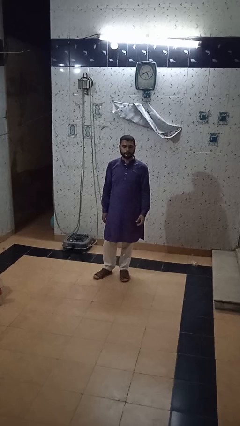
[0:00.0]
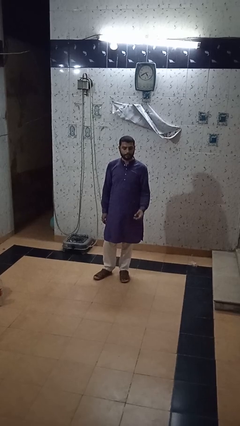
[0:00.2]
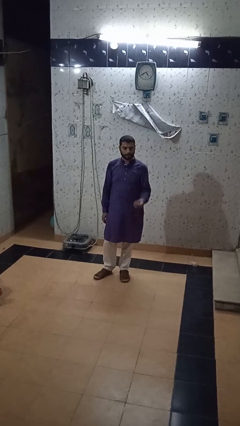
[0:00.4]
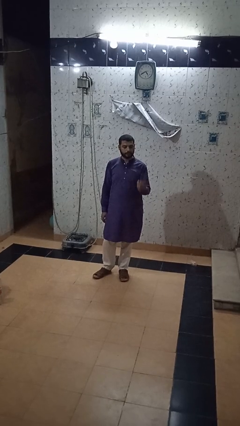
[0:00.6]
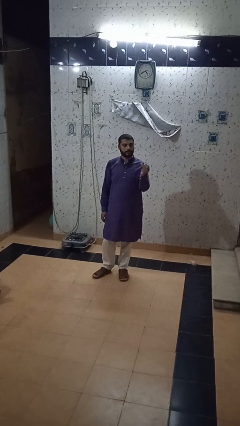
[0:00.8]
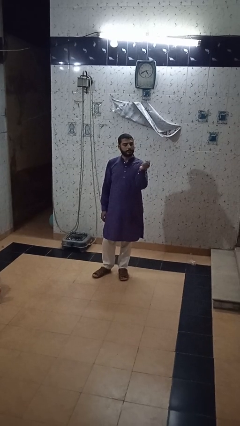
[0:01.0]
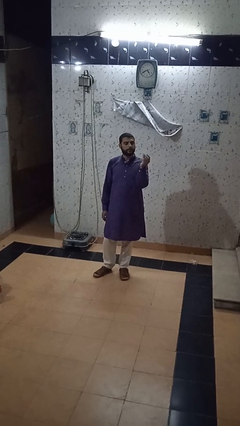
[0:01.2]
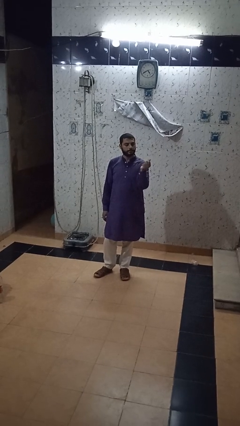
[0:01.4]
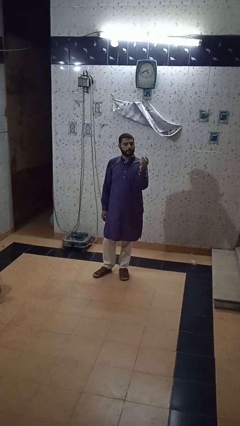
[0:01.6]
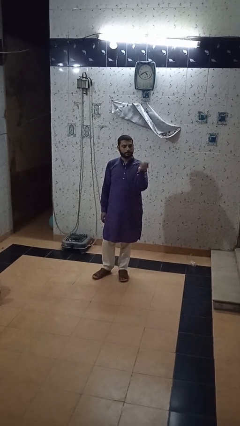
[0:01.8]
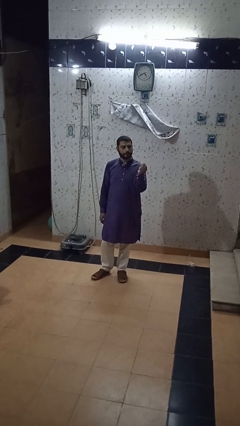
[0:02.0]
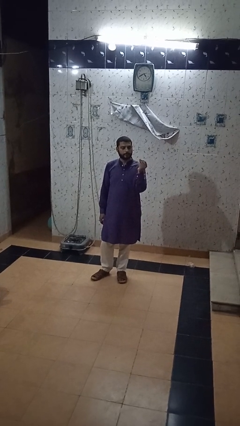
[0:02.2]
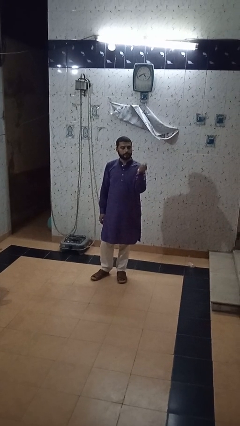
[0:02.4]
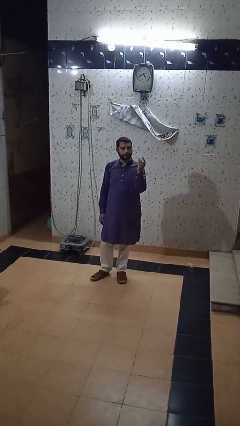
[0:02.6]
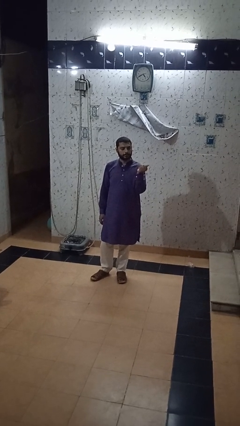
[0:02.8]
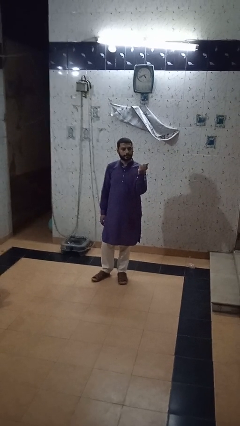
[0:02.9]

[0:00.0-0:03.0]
person snaps fingers

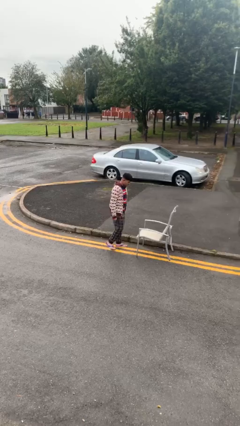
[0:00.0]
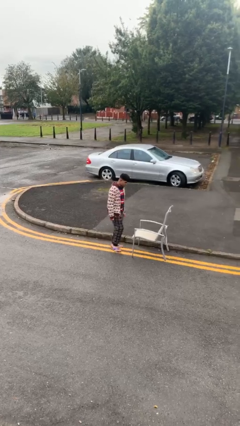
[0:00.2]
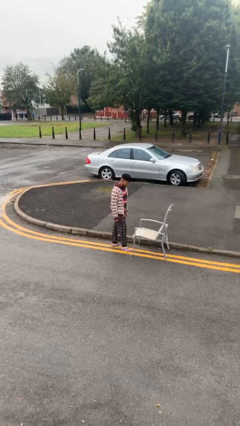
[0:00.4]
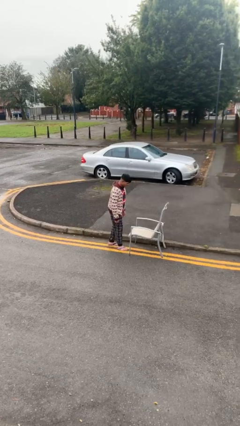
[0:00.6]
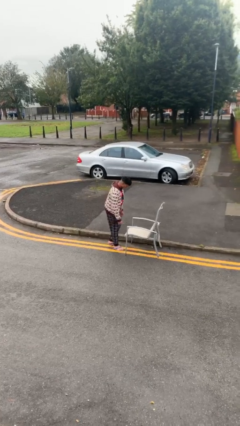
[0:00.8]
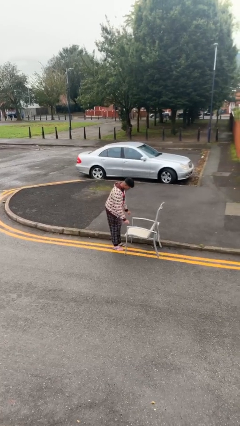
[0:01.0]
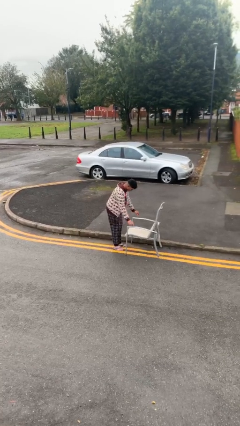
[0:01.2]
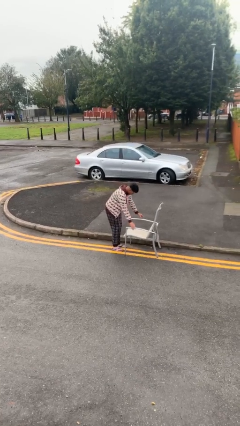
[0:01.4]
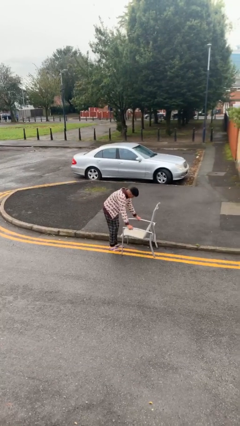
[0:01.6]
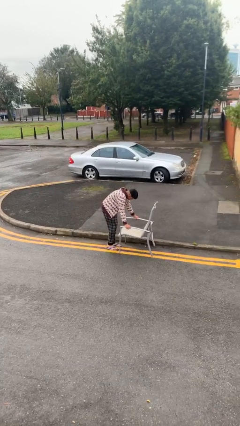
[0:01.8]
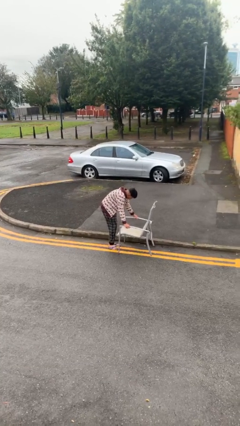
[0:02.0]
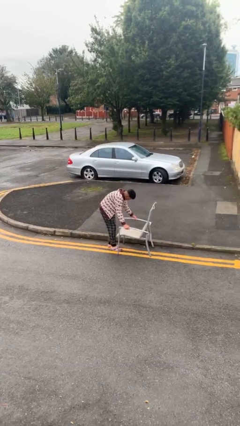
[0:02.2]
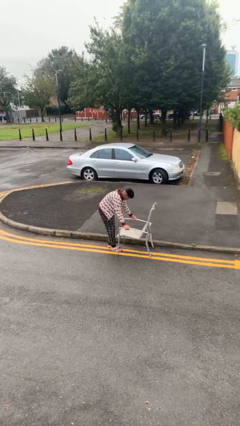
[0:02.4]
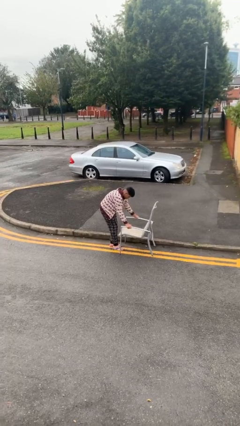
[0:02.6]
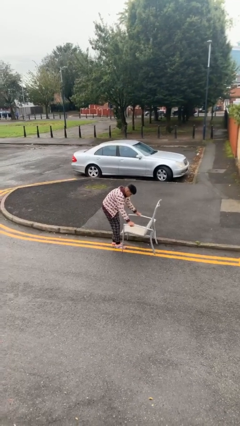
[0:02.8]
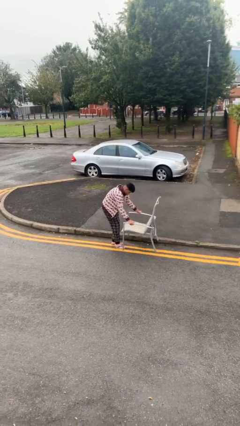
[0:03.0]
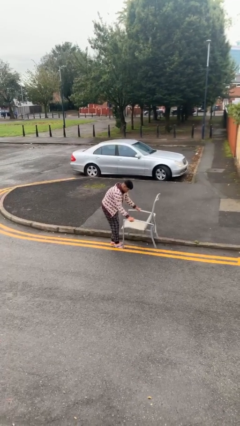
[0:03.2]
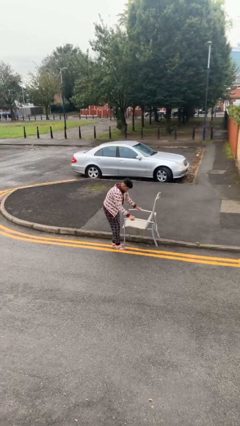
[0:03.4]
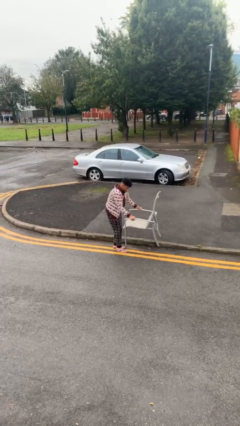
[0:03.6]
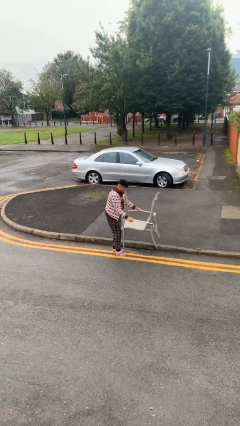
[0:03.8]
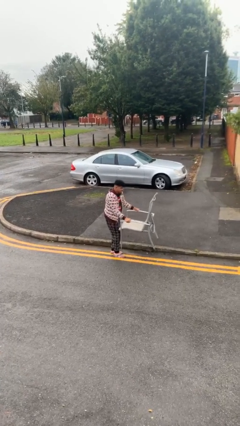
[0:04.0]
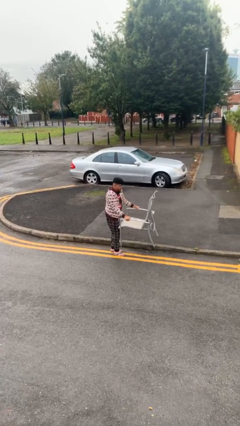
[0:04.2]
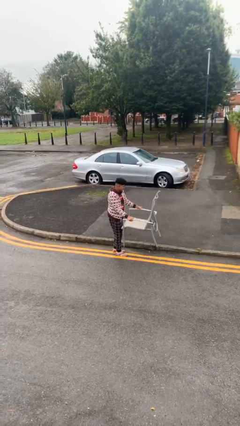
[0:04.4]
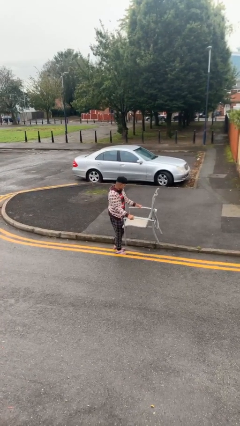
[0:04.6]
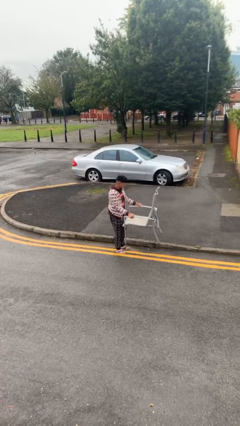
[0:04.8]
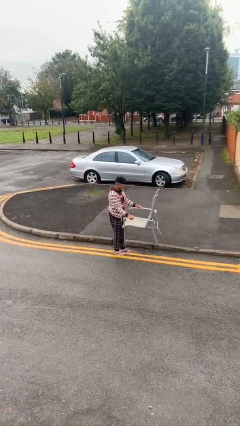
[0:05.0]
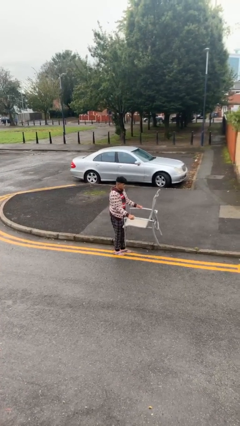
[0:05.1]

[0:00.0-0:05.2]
person picks up object from floor

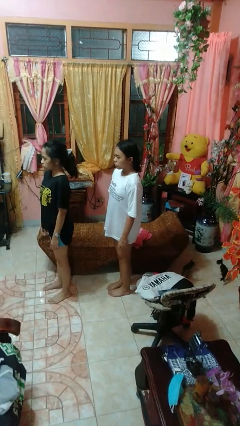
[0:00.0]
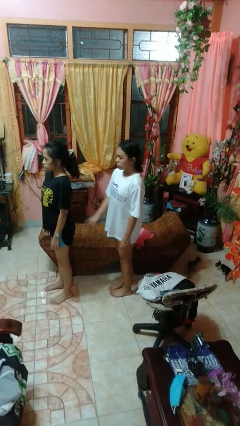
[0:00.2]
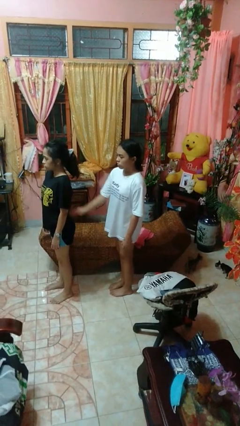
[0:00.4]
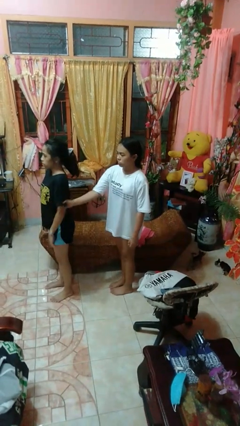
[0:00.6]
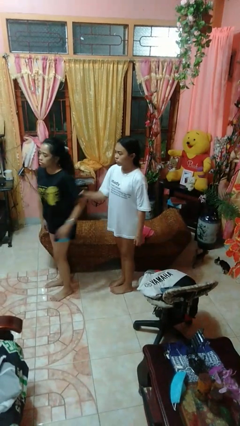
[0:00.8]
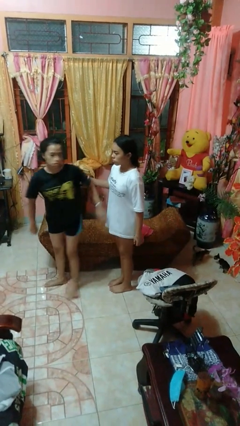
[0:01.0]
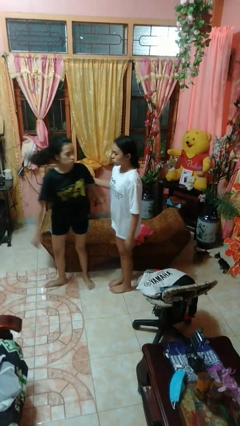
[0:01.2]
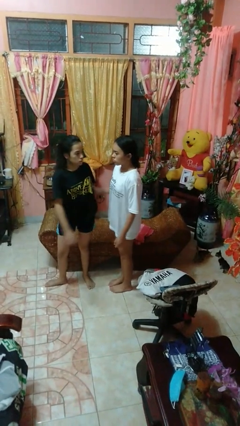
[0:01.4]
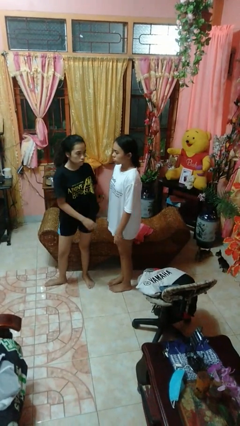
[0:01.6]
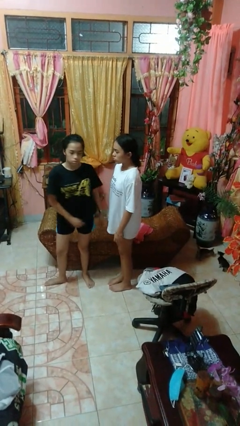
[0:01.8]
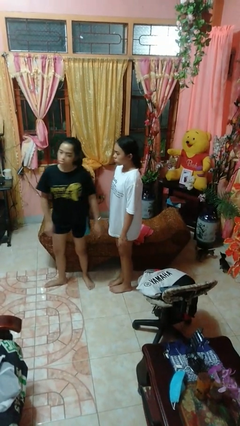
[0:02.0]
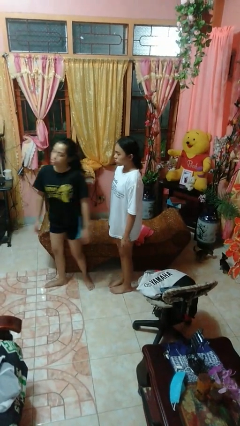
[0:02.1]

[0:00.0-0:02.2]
person grabs person by bicep

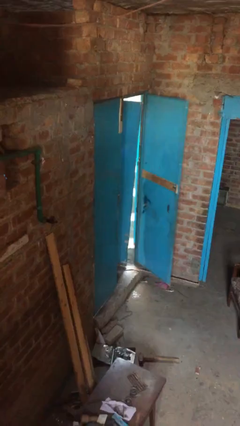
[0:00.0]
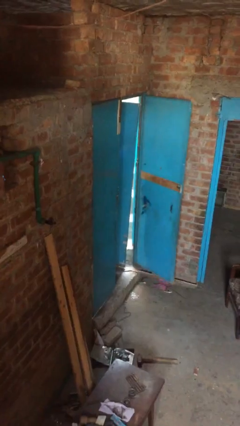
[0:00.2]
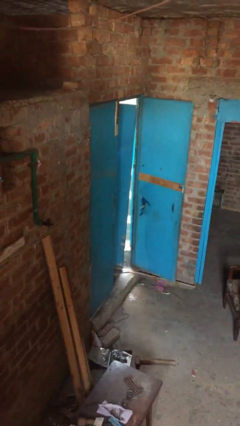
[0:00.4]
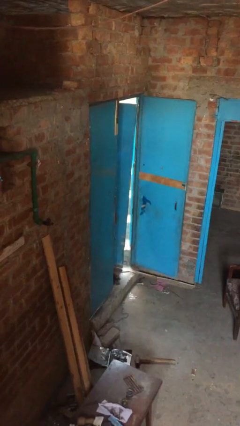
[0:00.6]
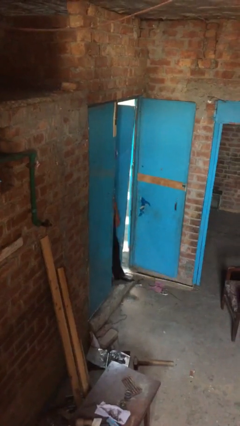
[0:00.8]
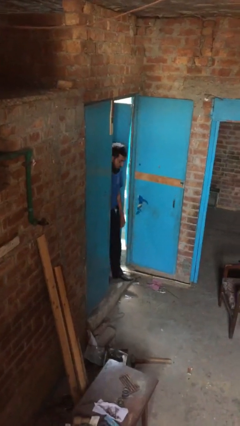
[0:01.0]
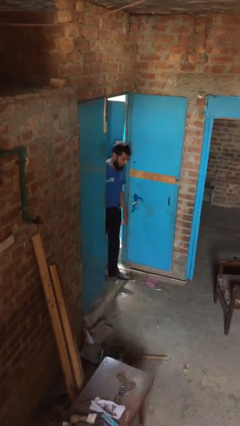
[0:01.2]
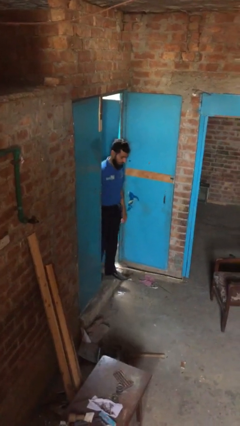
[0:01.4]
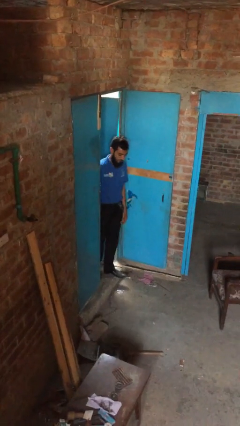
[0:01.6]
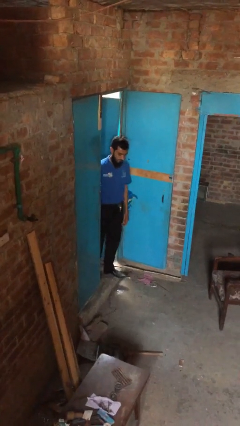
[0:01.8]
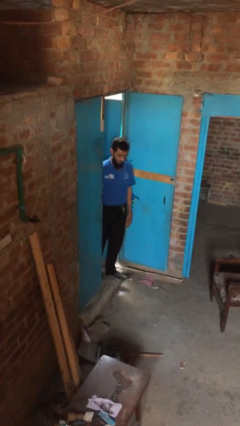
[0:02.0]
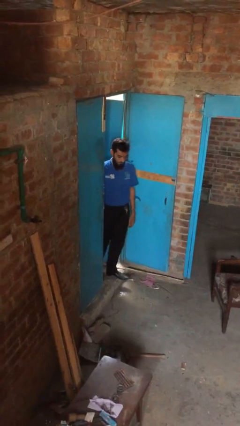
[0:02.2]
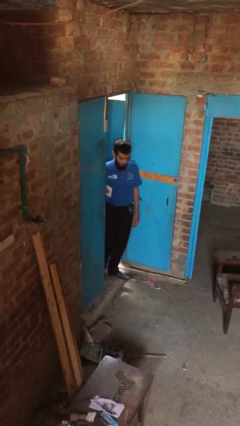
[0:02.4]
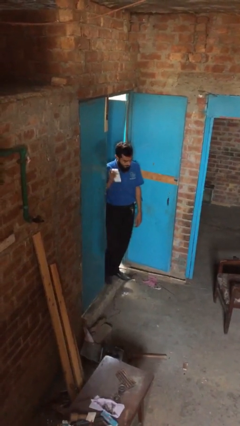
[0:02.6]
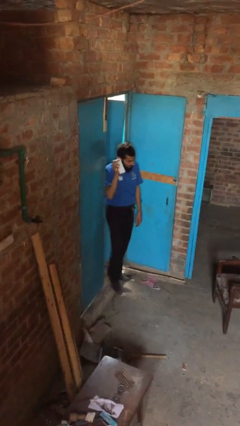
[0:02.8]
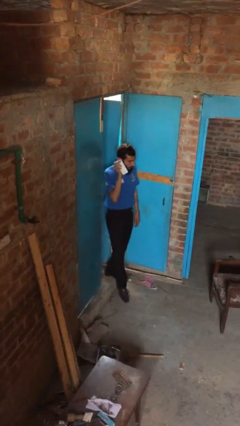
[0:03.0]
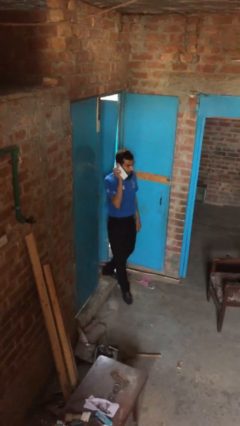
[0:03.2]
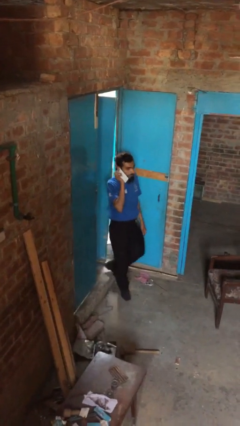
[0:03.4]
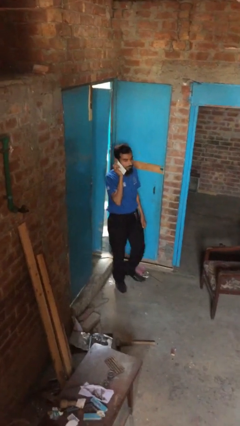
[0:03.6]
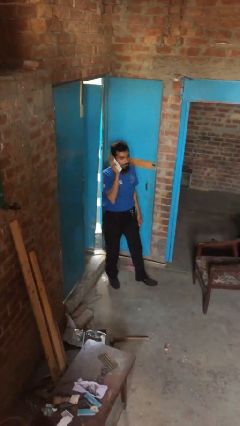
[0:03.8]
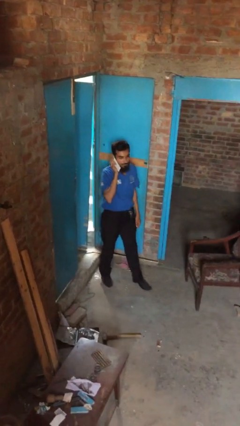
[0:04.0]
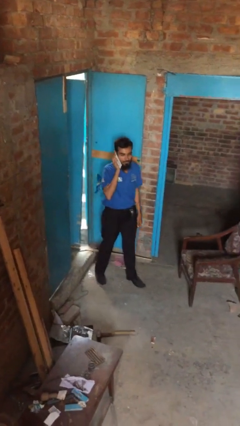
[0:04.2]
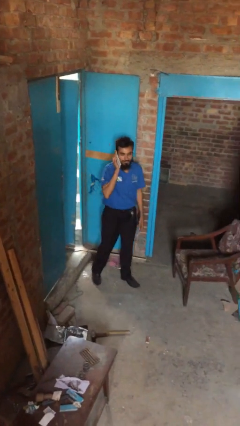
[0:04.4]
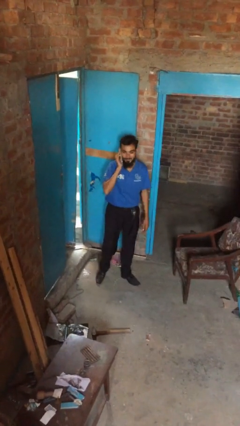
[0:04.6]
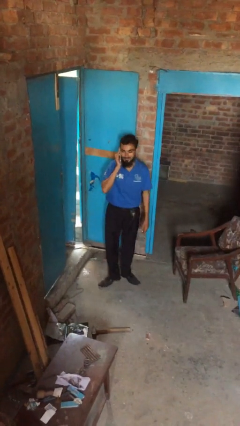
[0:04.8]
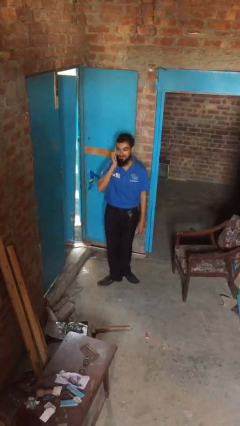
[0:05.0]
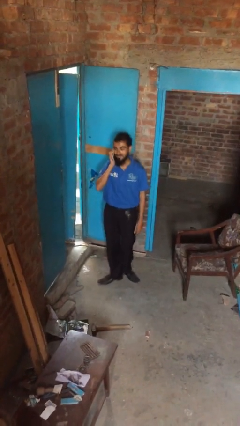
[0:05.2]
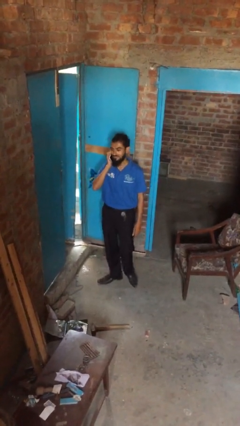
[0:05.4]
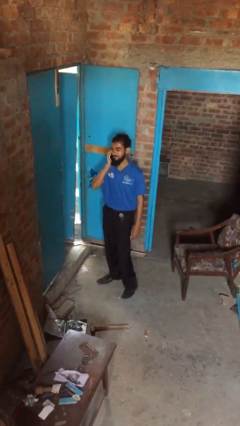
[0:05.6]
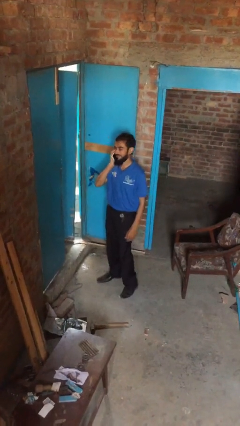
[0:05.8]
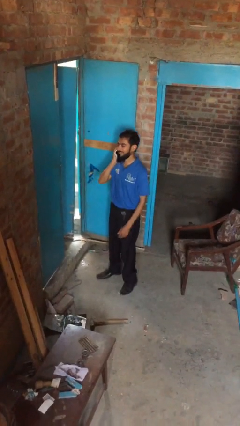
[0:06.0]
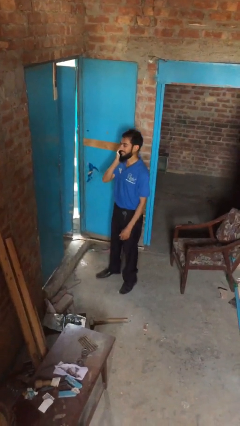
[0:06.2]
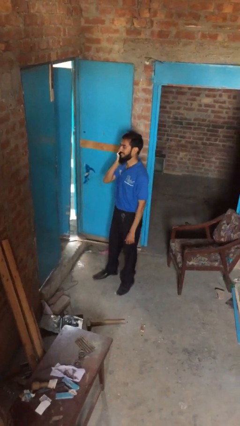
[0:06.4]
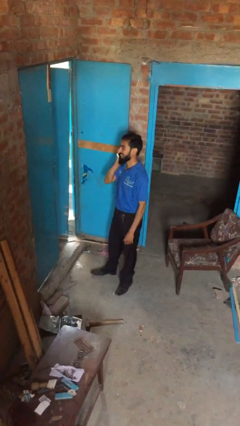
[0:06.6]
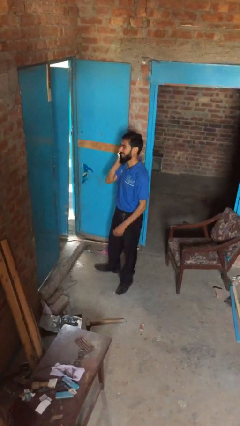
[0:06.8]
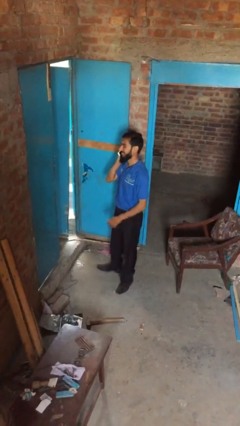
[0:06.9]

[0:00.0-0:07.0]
person enters scene through structure

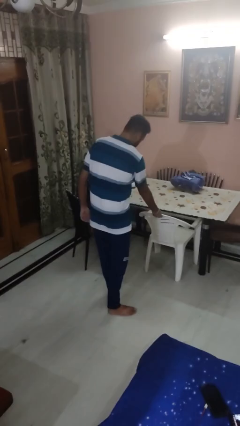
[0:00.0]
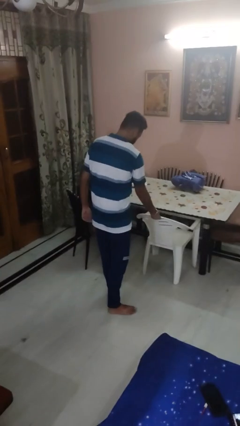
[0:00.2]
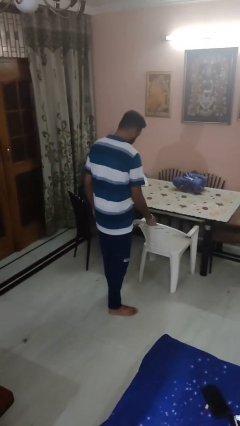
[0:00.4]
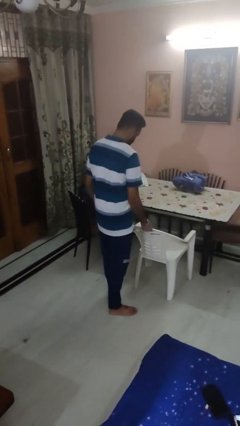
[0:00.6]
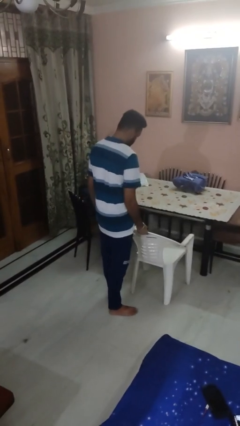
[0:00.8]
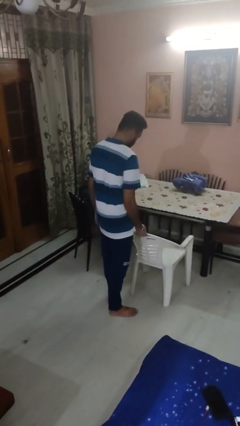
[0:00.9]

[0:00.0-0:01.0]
person pulls out chair
